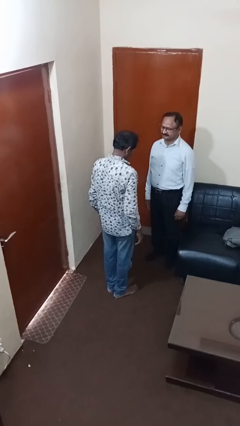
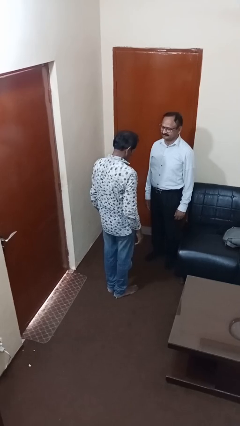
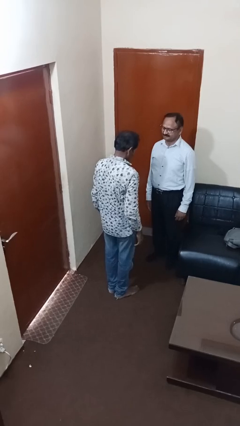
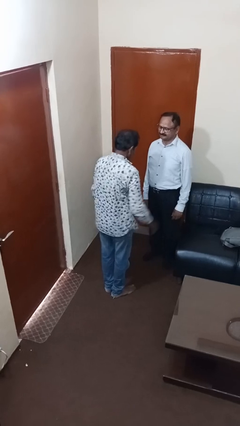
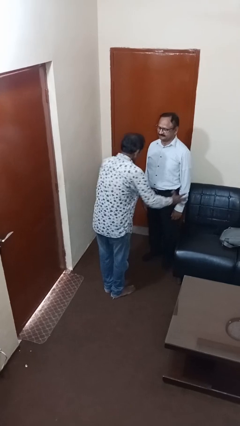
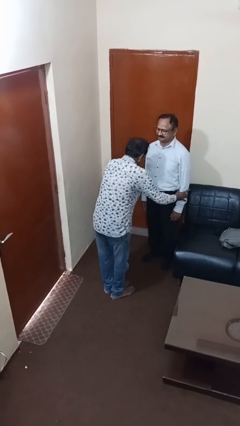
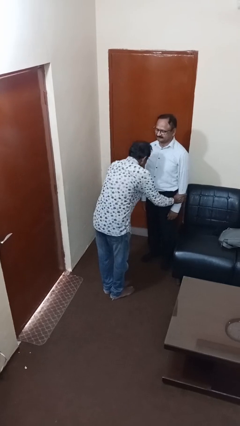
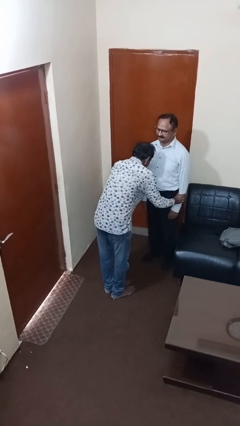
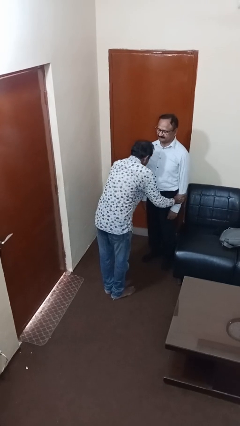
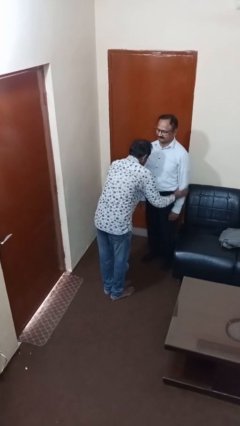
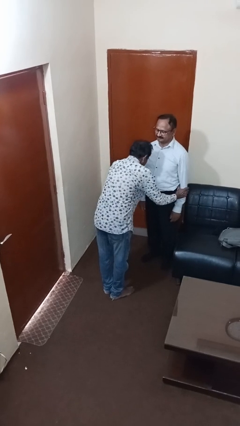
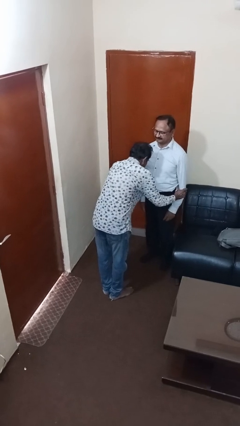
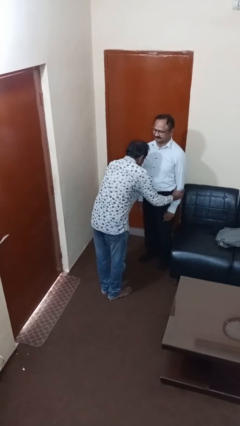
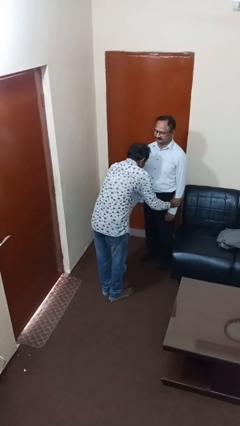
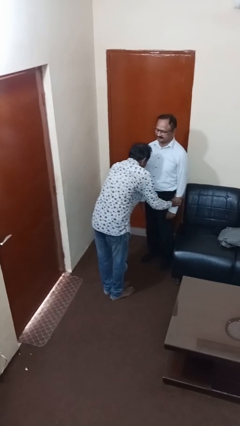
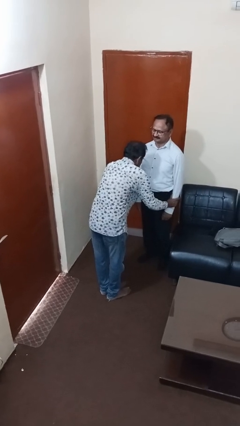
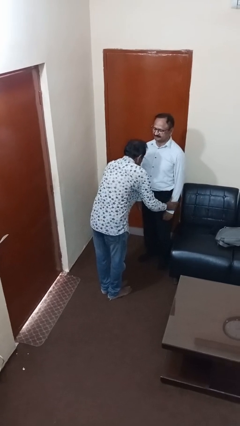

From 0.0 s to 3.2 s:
person grabs person by forearm

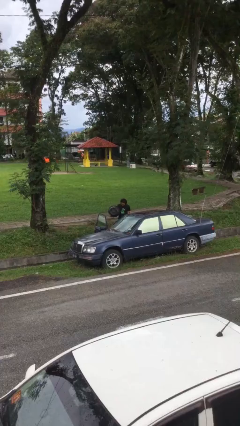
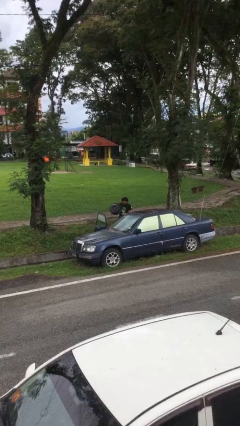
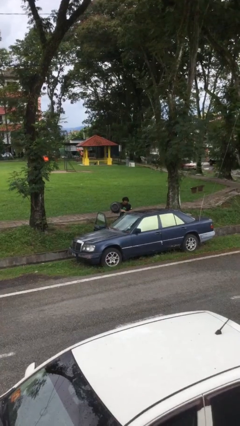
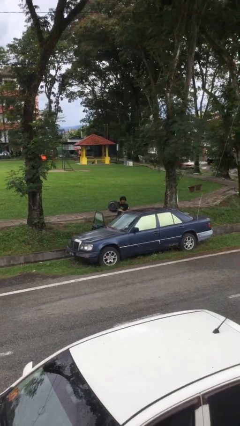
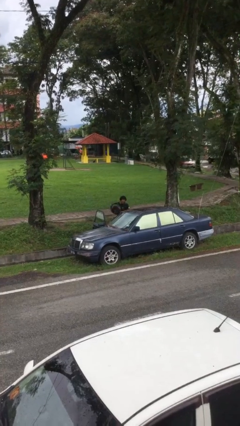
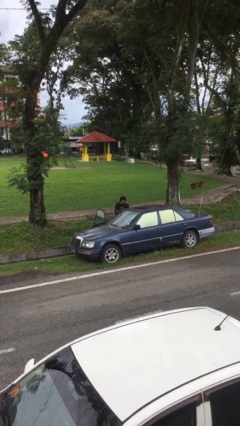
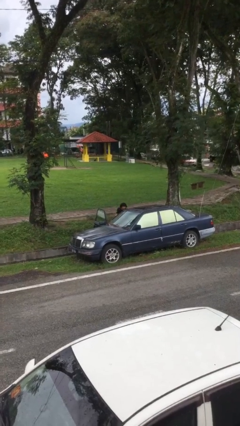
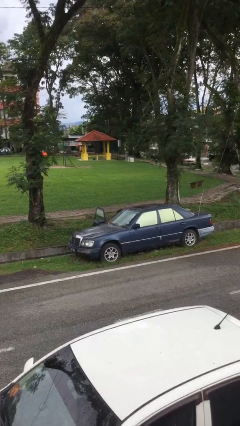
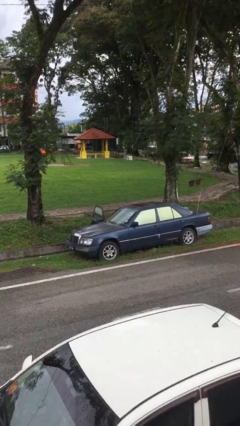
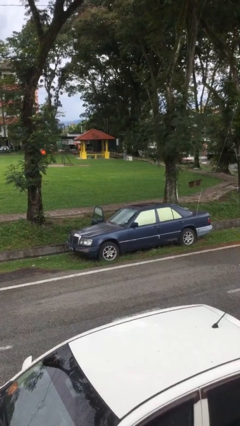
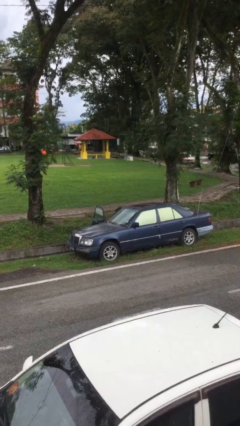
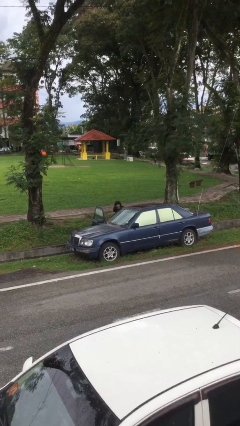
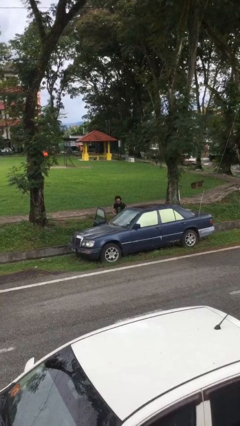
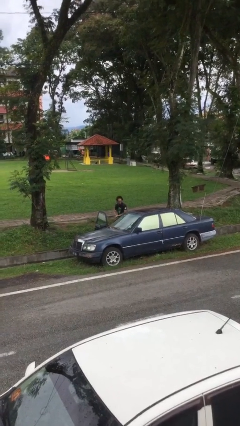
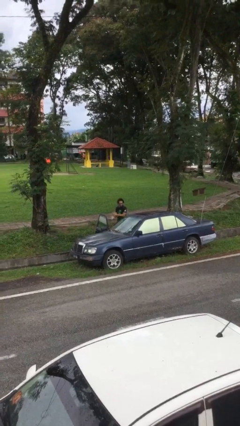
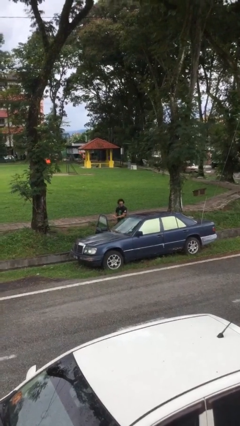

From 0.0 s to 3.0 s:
person loads car

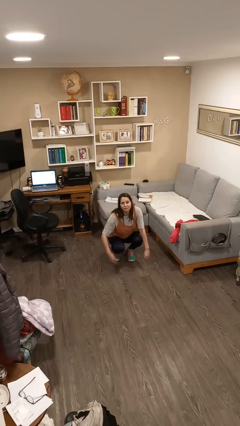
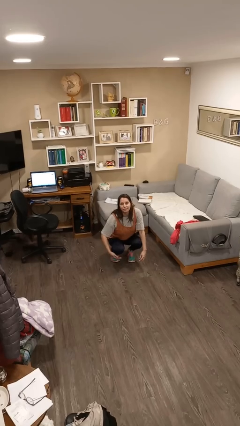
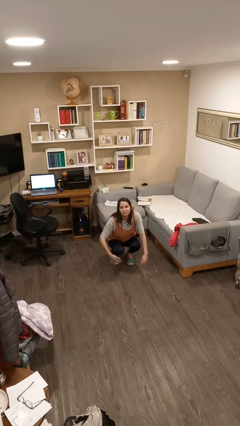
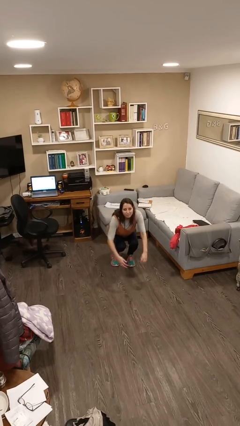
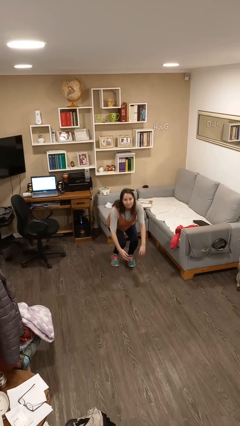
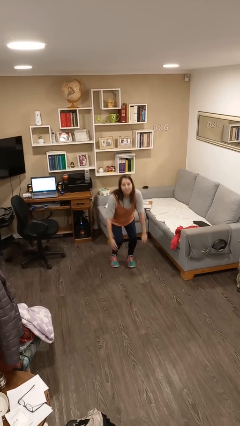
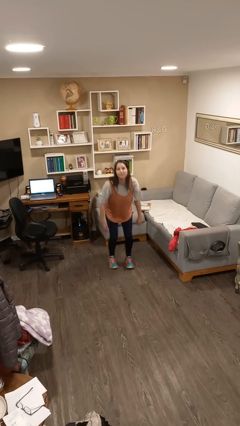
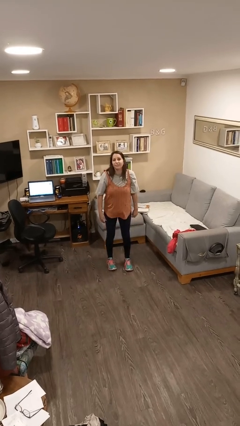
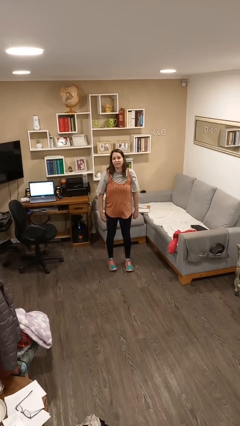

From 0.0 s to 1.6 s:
person stands up

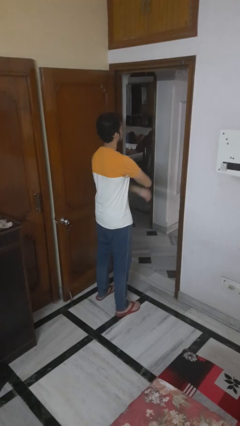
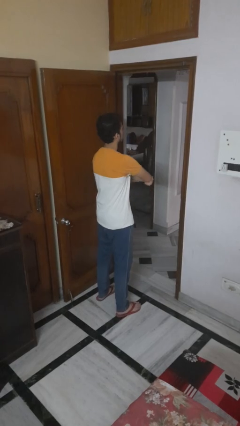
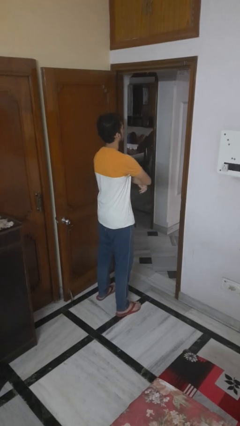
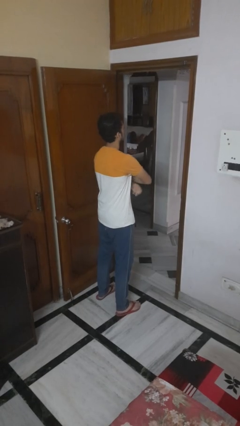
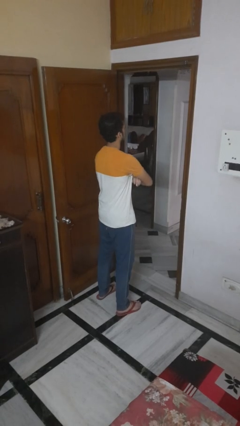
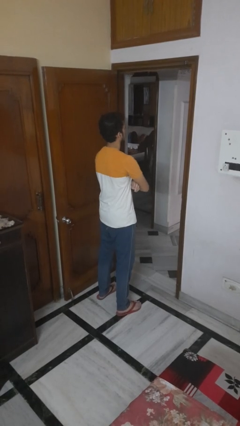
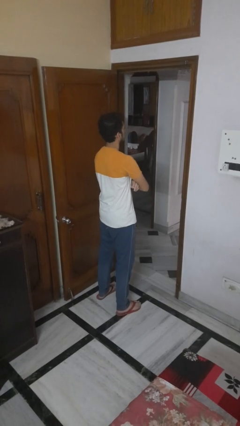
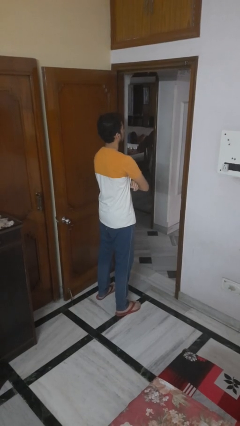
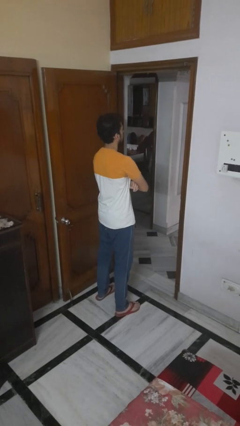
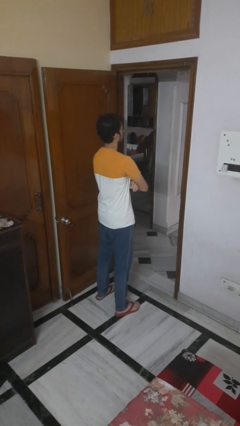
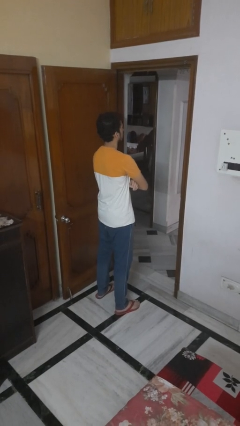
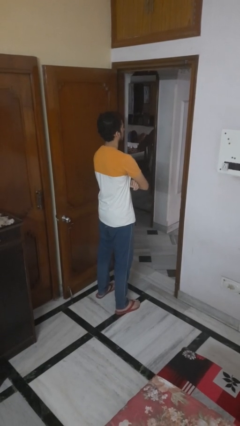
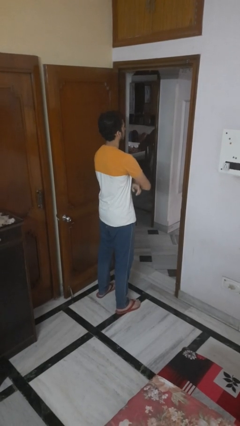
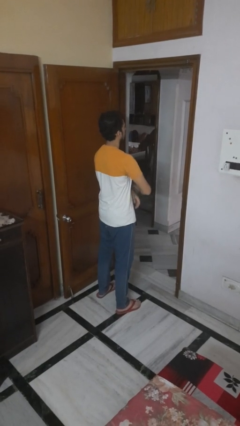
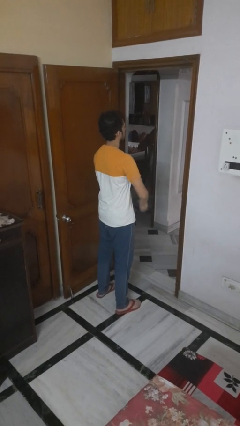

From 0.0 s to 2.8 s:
person crosses arms

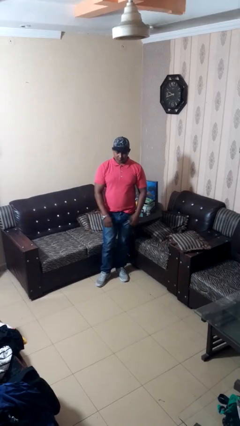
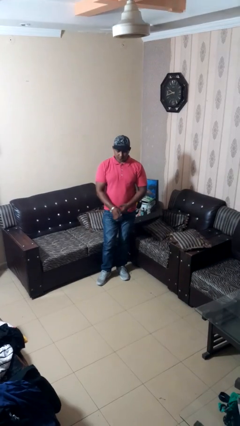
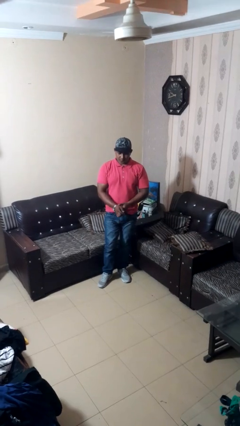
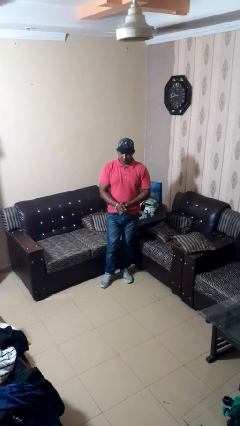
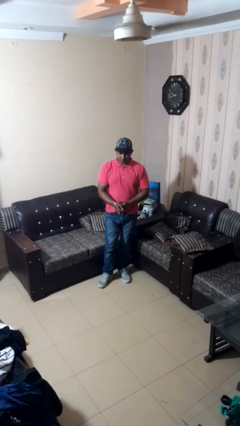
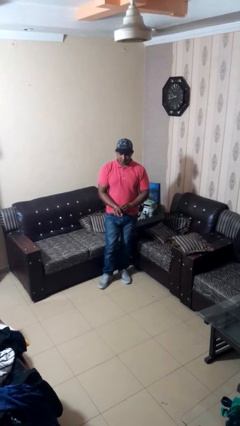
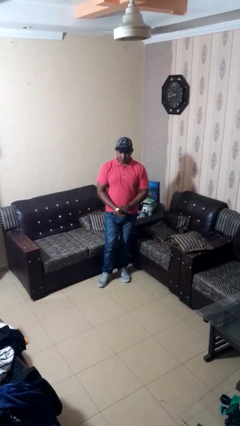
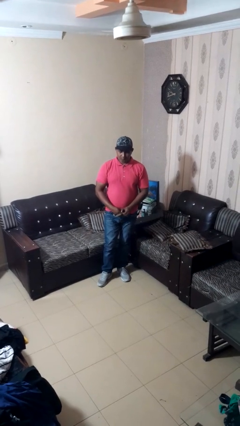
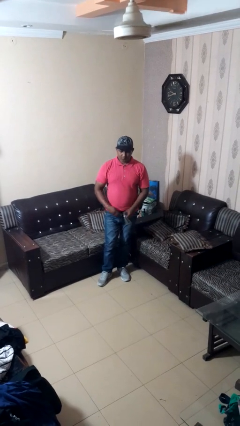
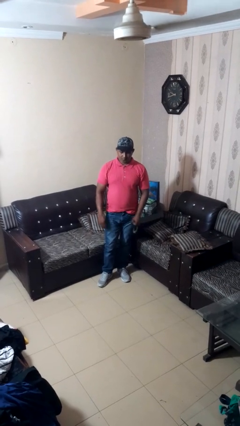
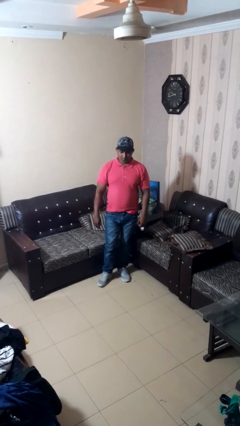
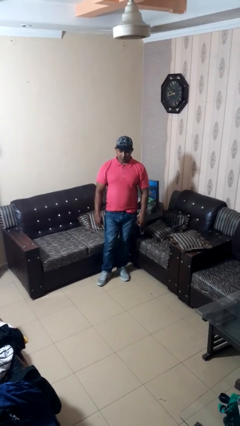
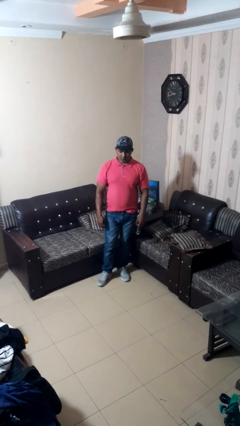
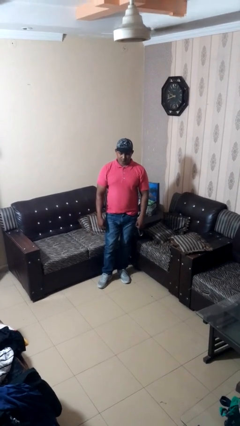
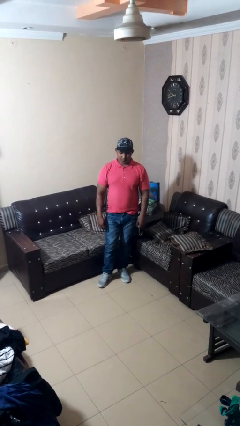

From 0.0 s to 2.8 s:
person takes off wristwatch

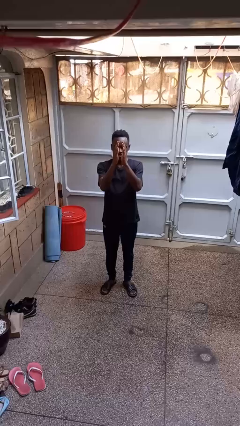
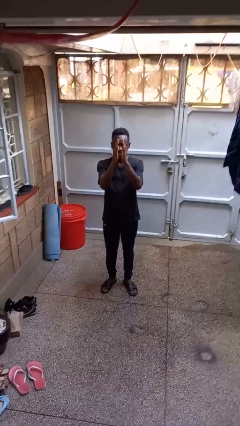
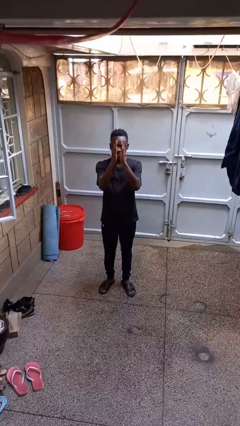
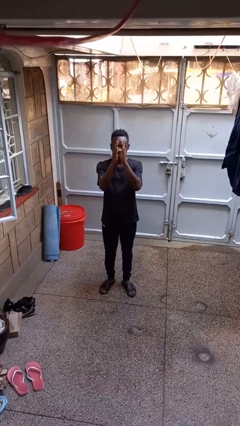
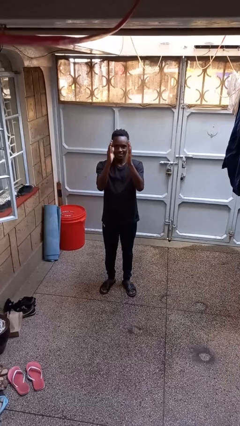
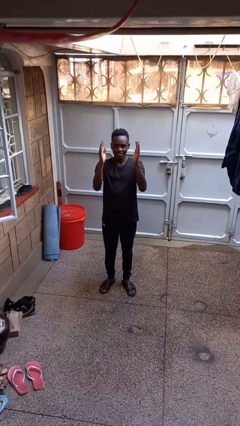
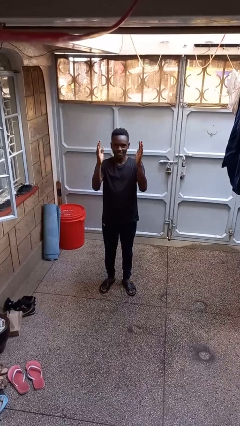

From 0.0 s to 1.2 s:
person gestures zoom out

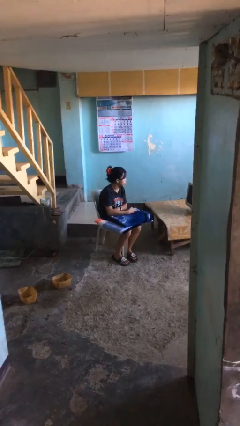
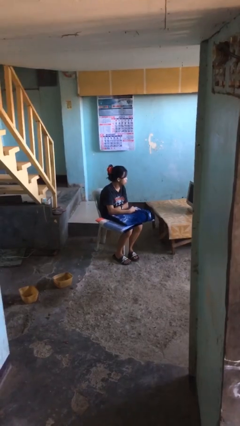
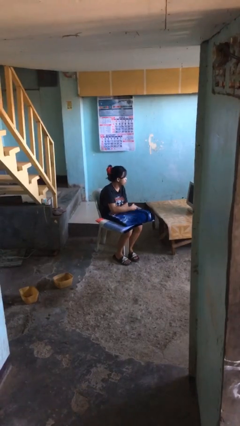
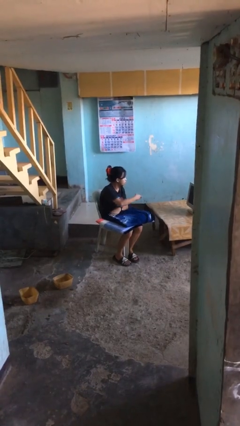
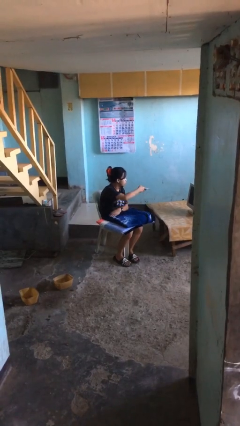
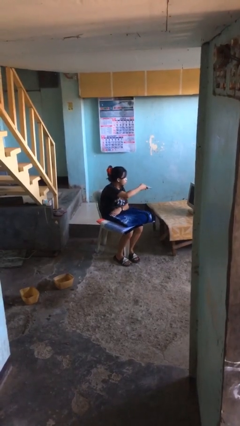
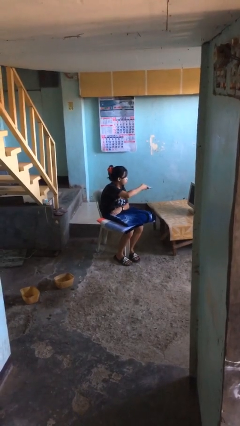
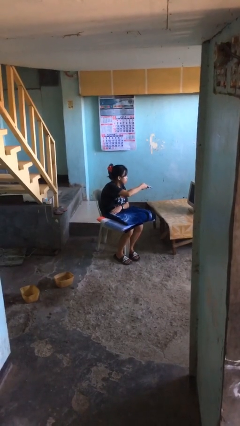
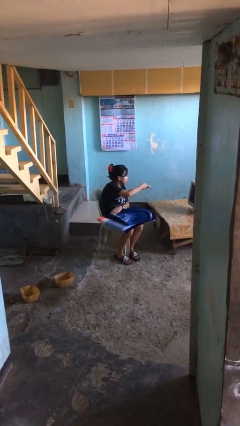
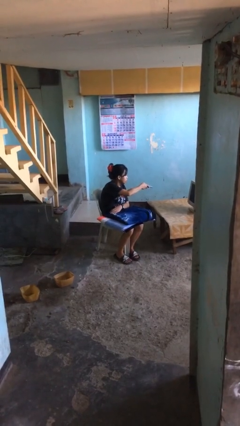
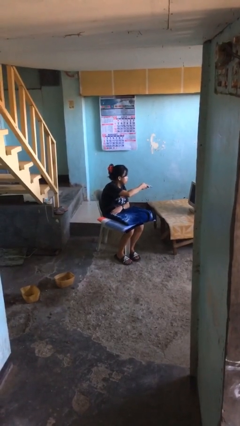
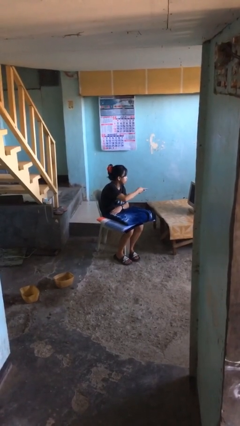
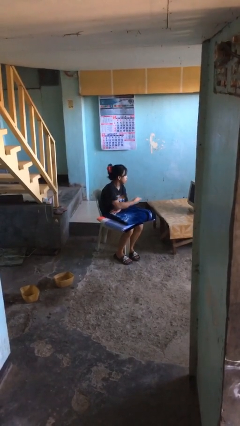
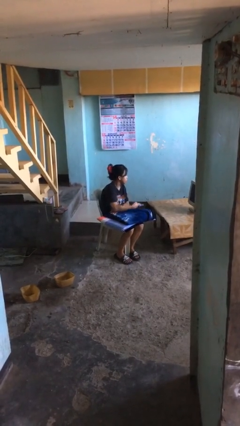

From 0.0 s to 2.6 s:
person uses television remote
